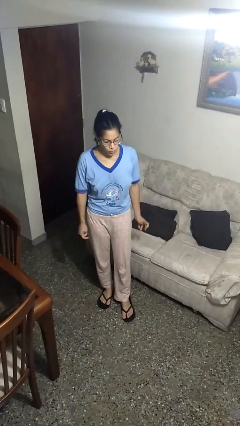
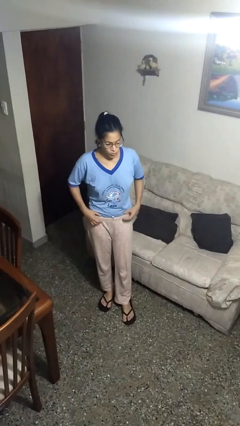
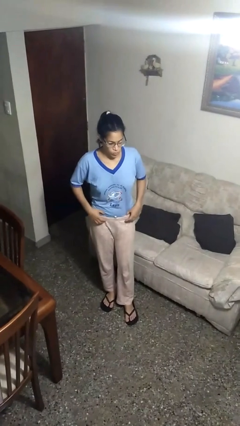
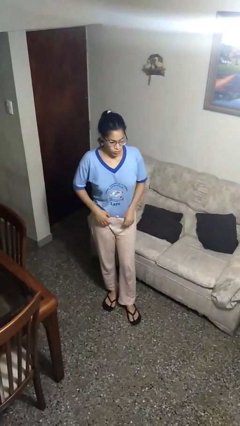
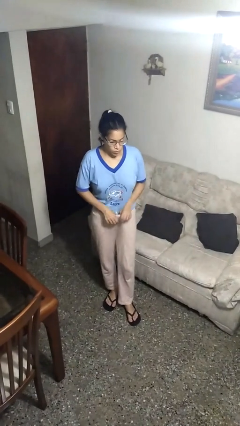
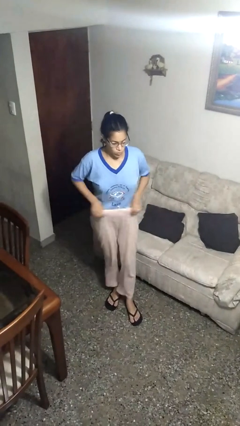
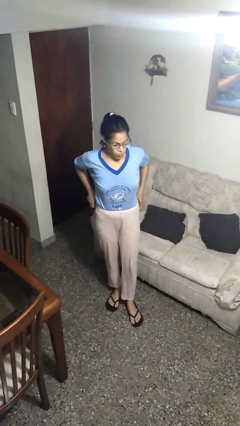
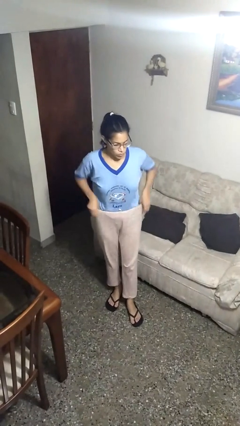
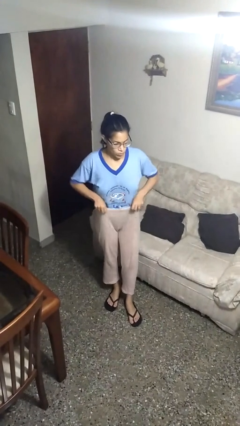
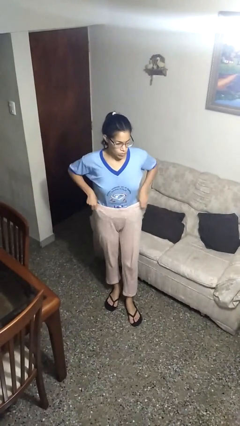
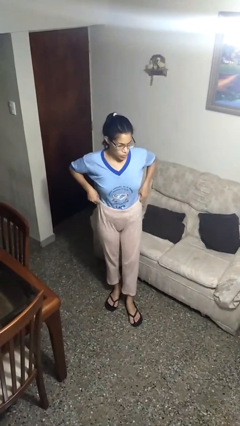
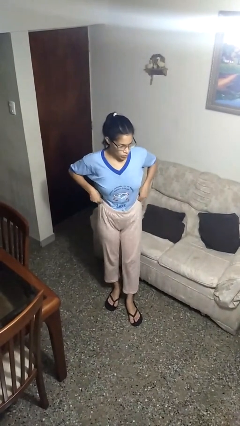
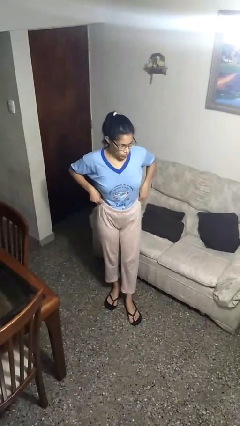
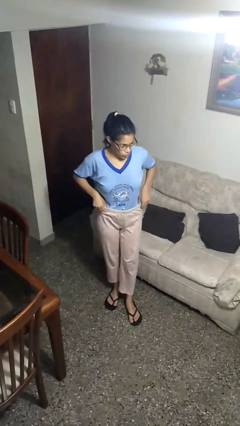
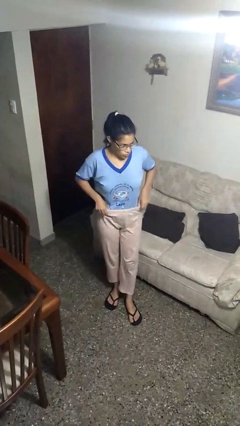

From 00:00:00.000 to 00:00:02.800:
person hikes up pants

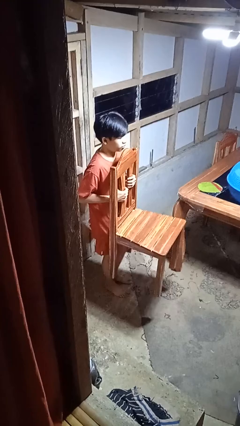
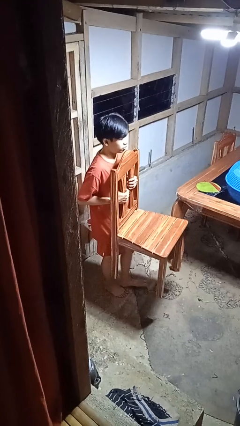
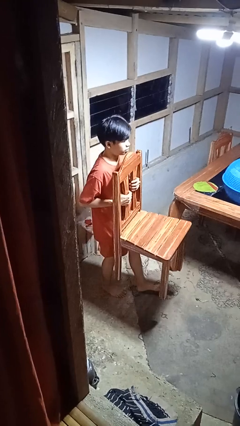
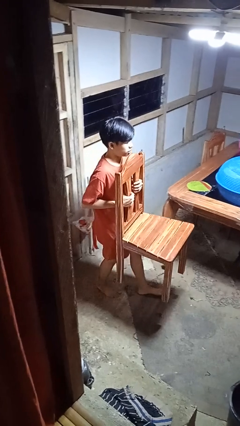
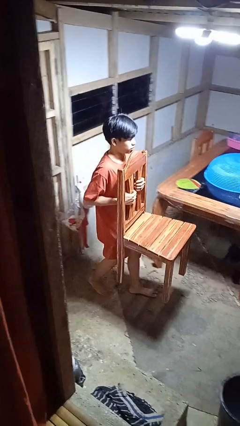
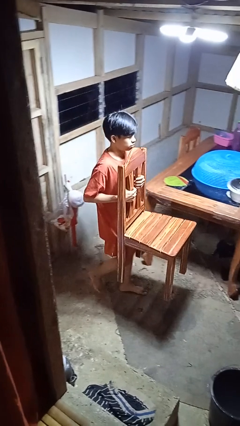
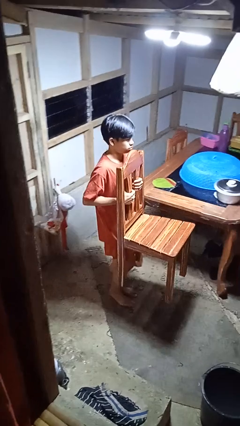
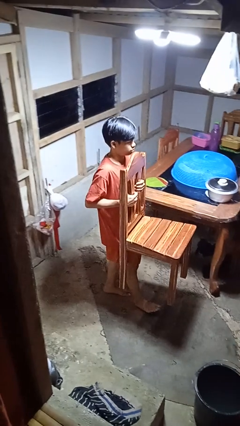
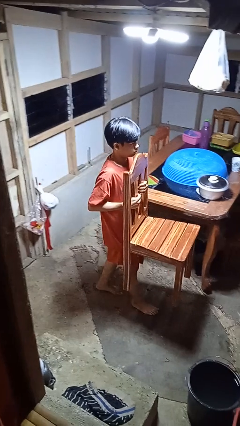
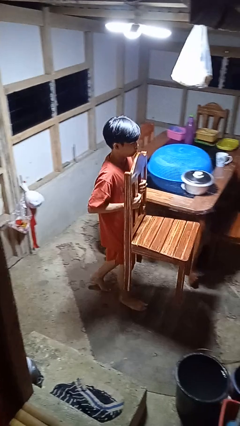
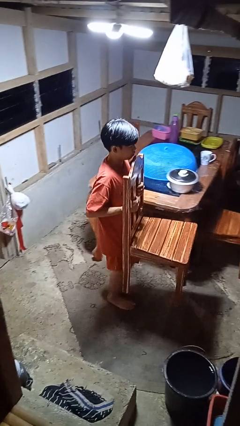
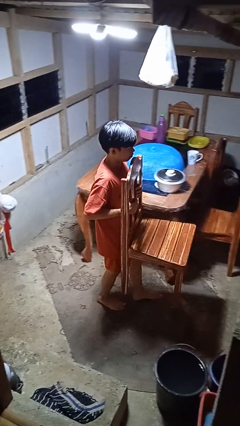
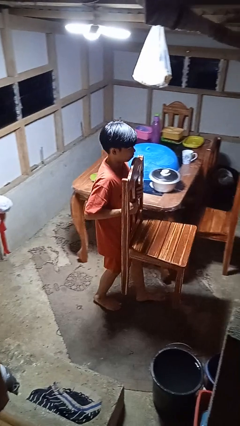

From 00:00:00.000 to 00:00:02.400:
person carries furniture

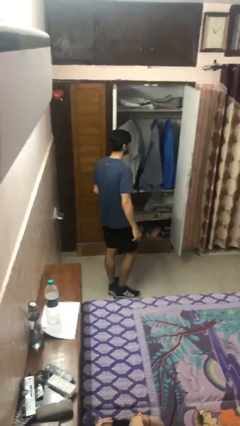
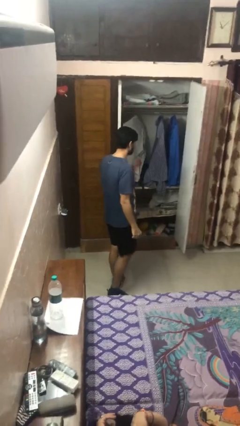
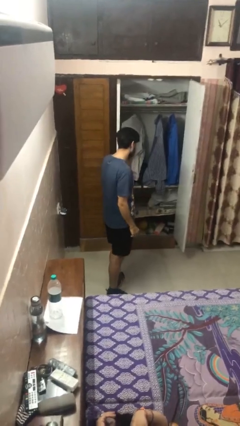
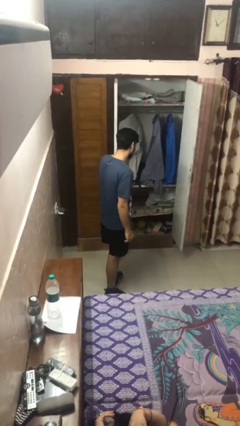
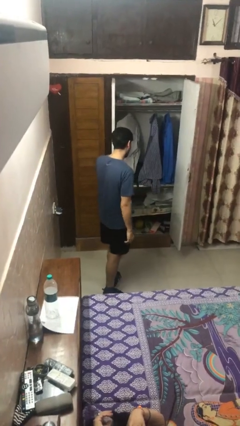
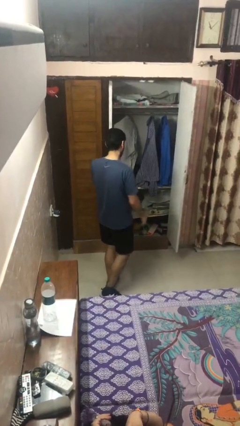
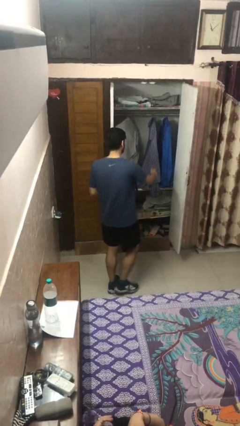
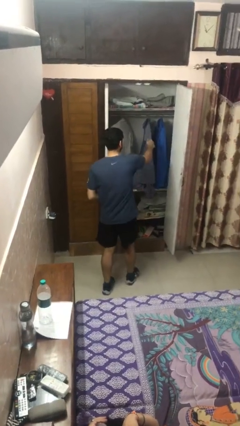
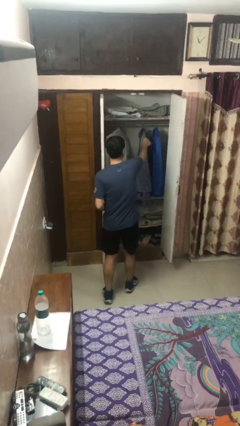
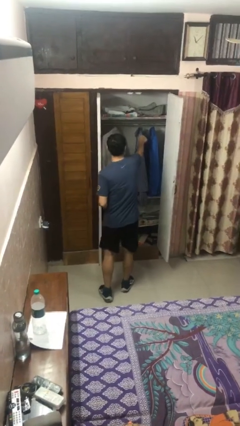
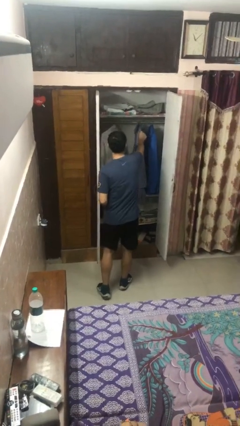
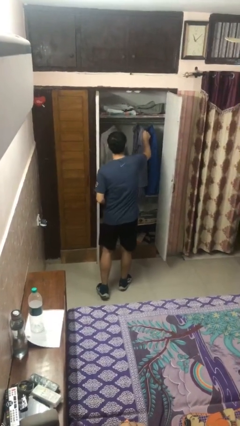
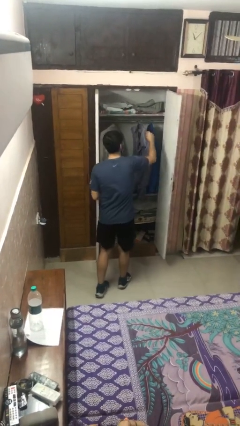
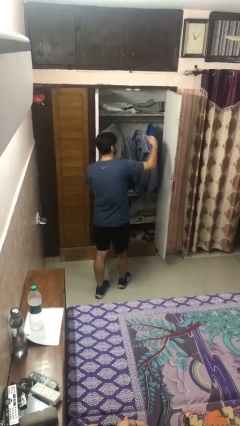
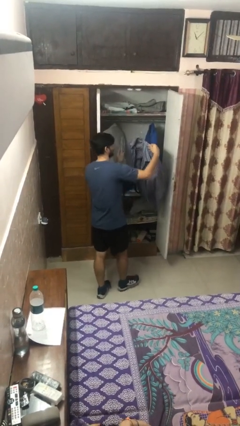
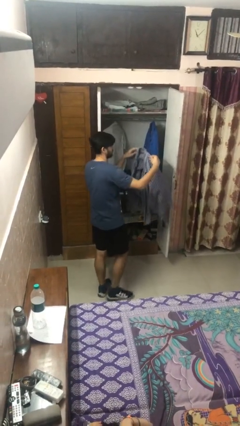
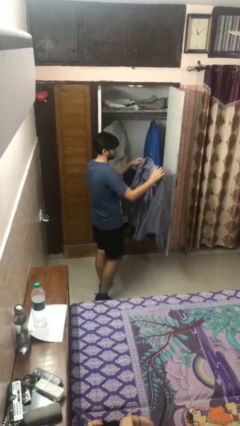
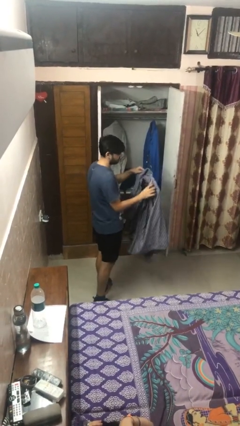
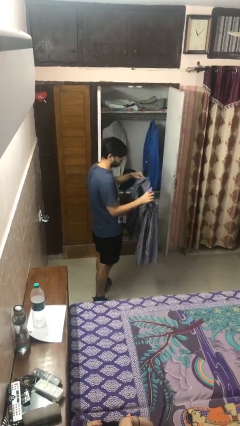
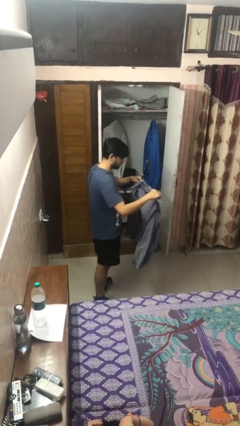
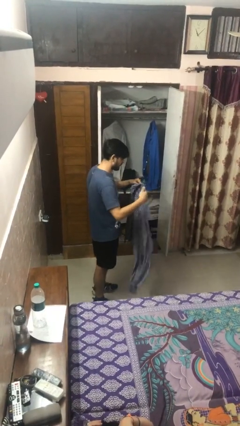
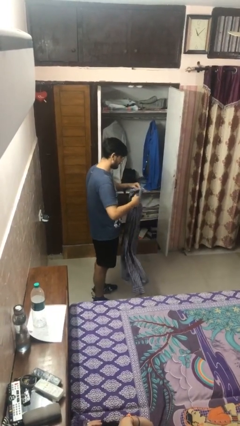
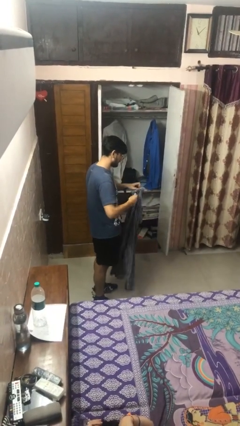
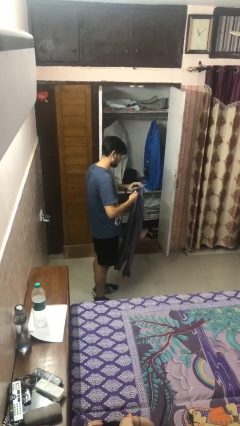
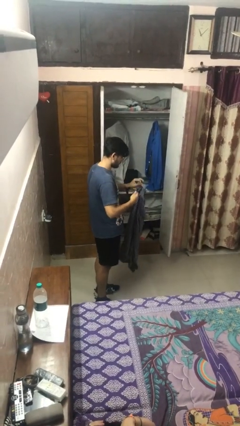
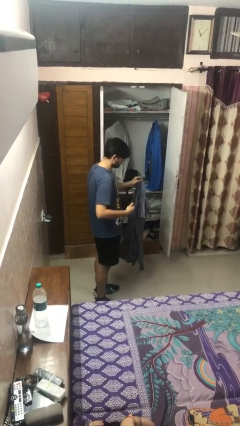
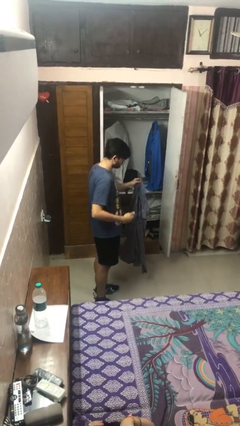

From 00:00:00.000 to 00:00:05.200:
person takes clothes from closet

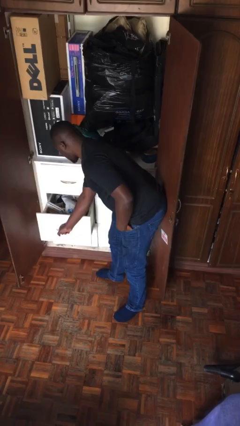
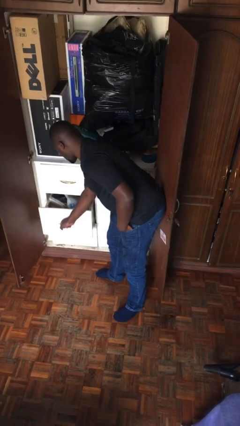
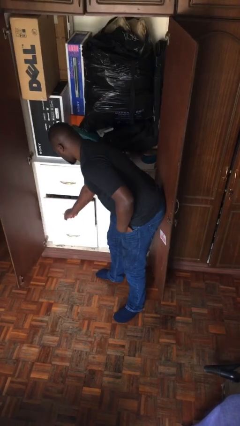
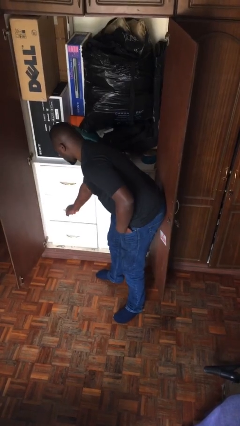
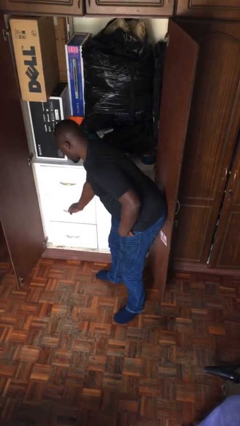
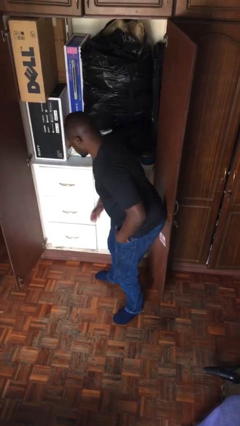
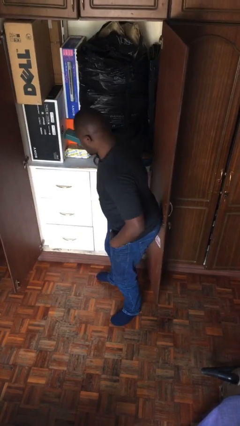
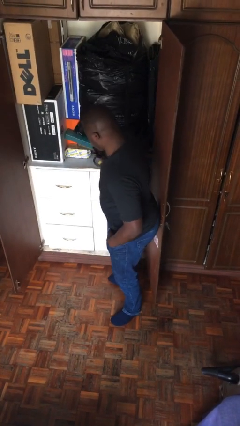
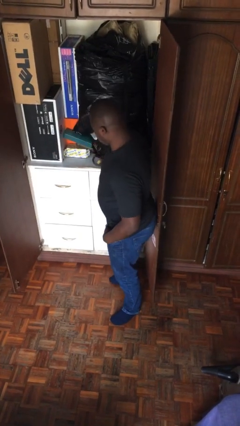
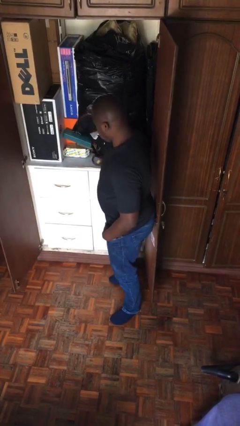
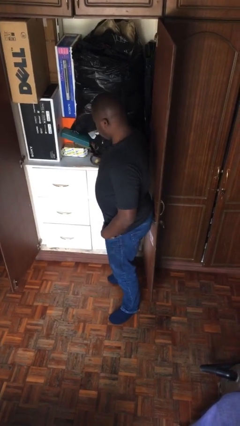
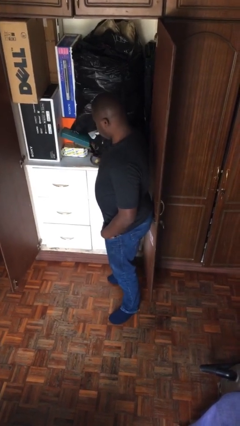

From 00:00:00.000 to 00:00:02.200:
person closes dresser drawer

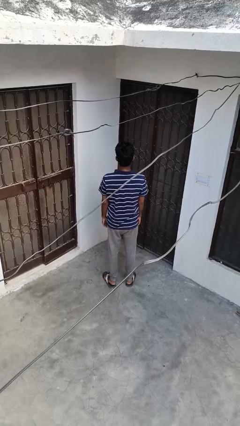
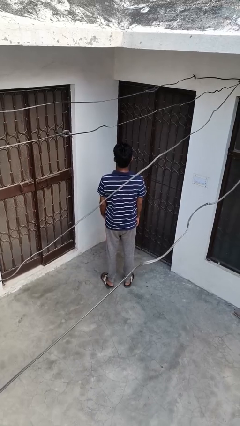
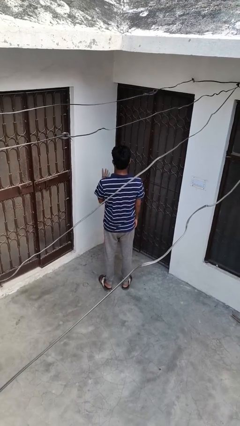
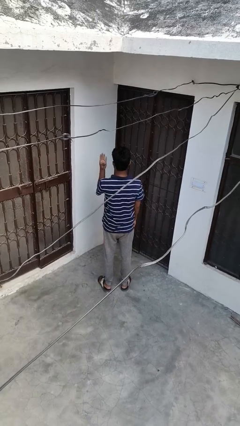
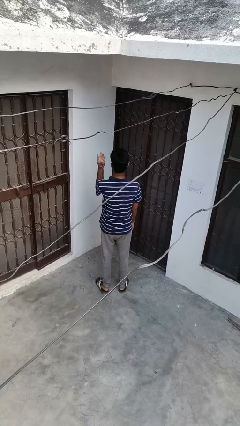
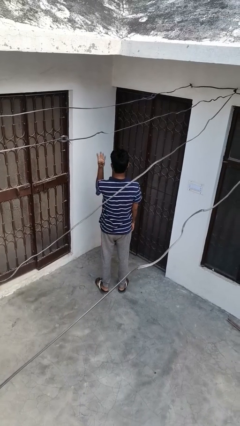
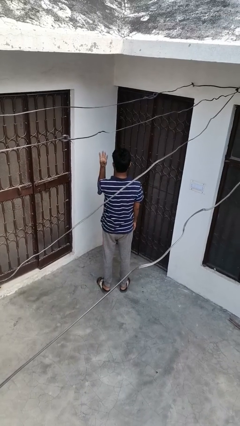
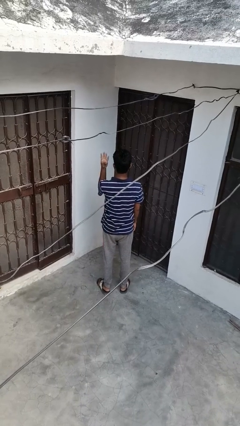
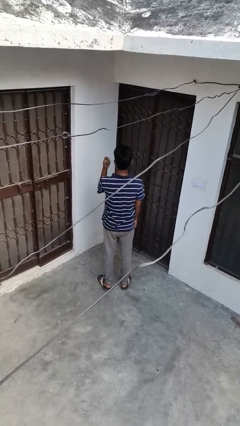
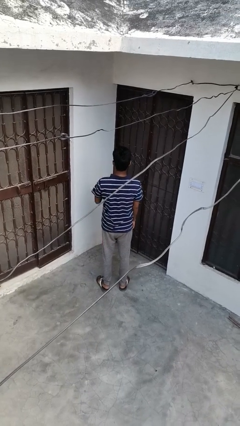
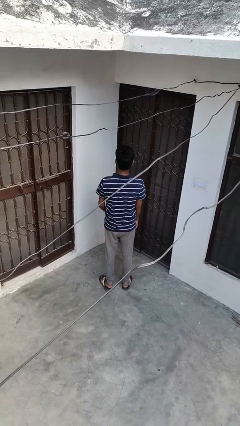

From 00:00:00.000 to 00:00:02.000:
person gestures number four

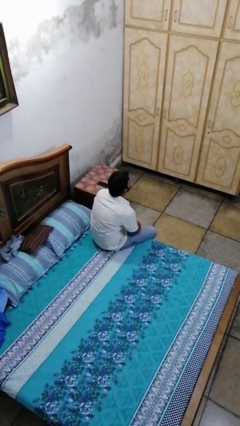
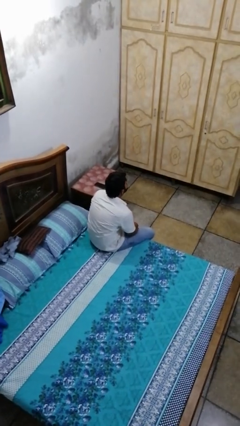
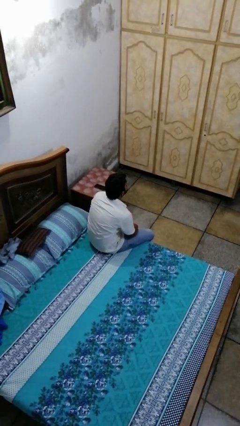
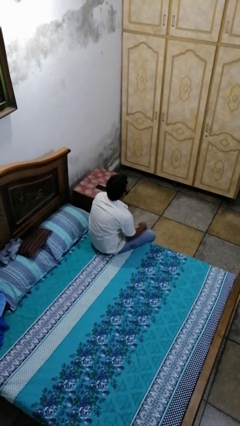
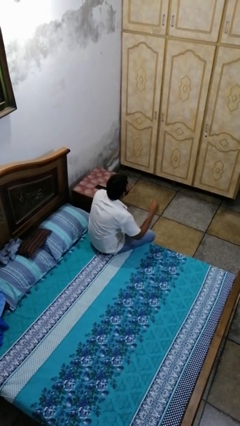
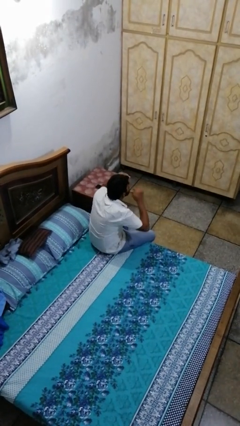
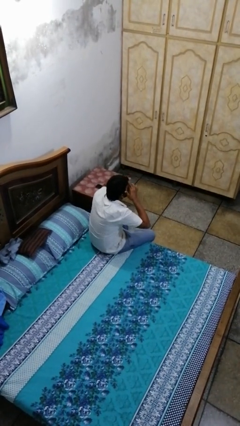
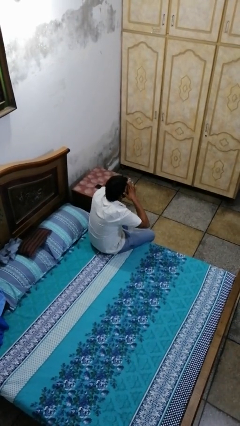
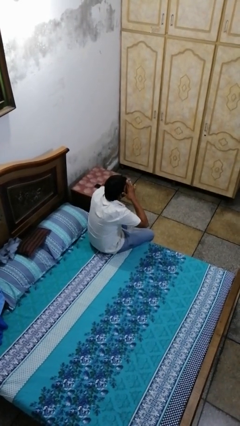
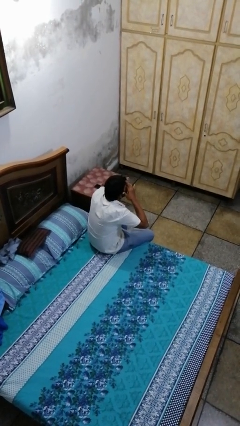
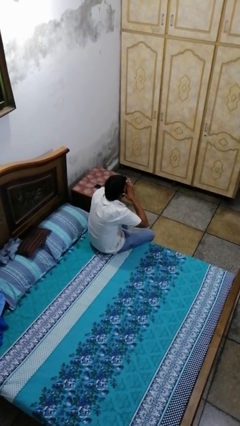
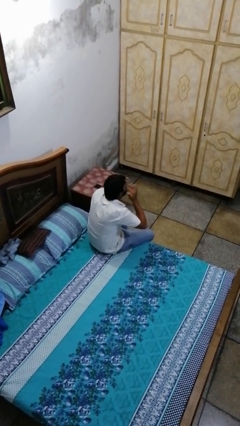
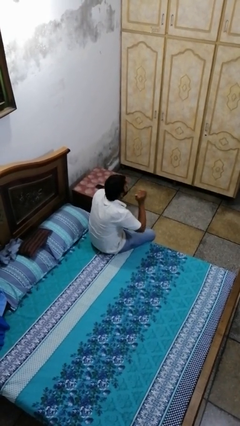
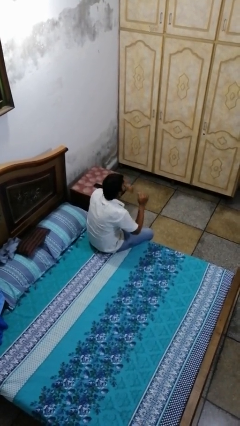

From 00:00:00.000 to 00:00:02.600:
person rubs eyes

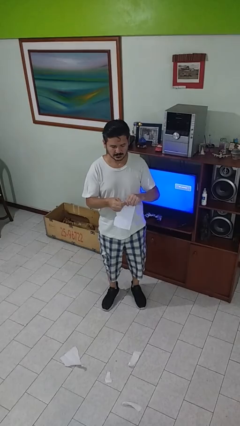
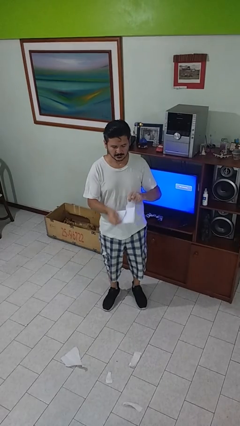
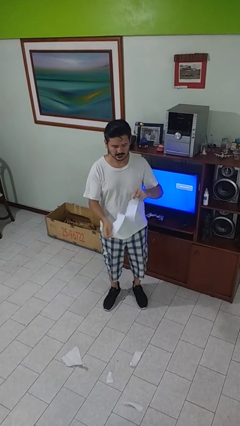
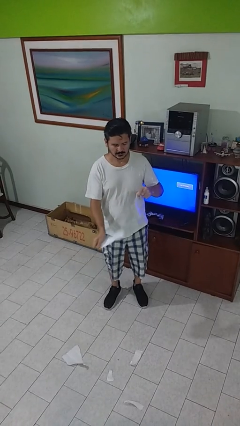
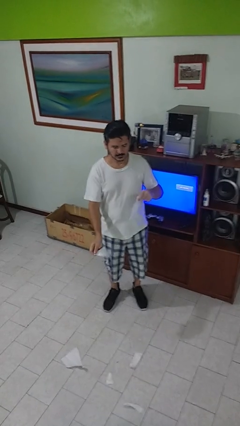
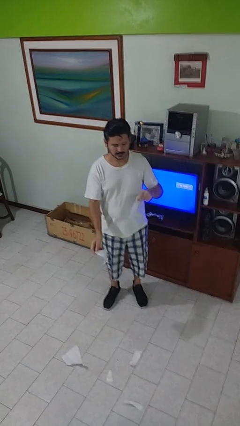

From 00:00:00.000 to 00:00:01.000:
person tears paper
